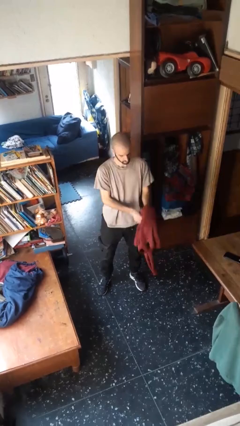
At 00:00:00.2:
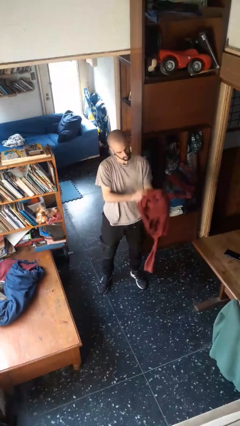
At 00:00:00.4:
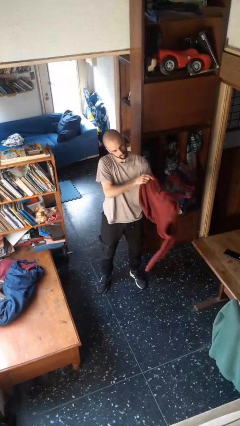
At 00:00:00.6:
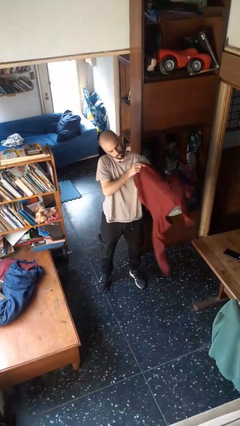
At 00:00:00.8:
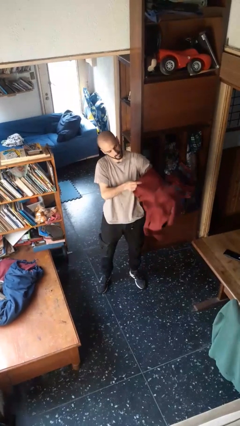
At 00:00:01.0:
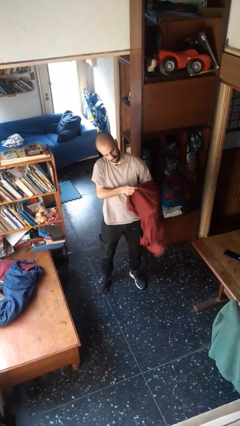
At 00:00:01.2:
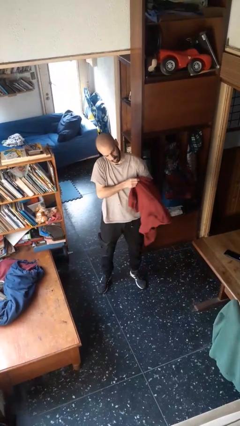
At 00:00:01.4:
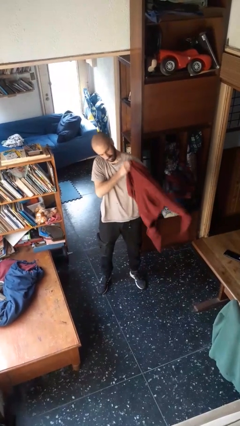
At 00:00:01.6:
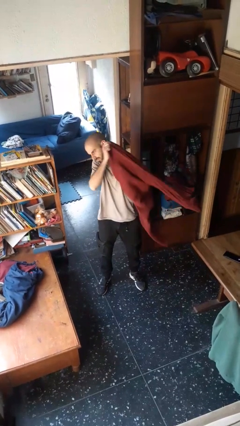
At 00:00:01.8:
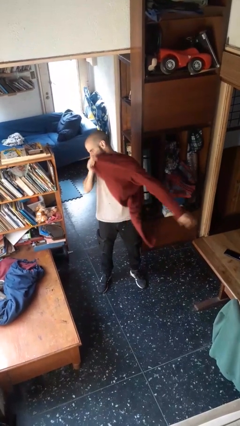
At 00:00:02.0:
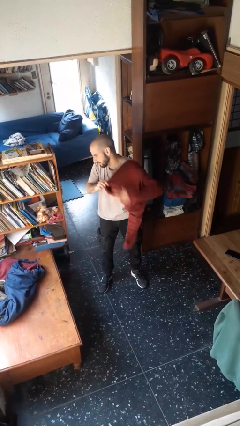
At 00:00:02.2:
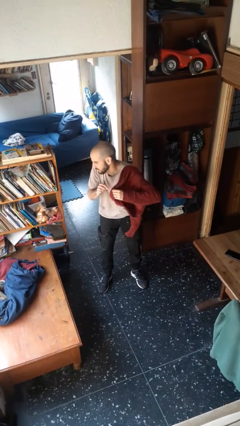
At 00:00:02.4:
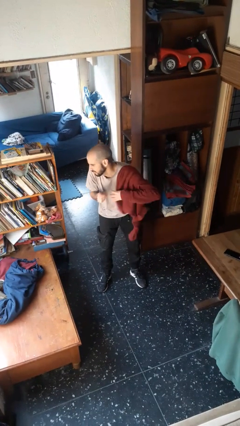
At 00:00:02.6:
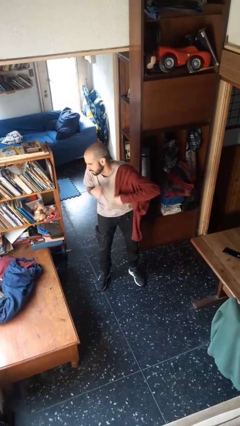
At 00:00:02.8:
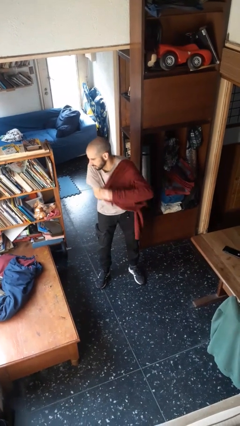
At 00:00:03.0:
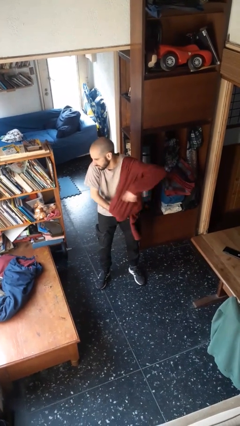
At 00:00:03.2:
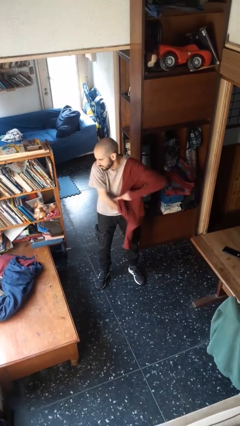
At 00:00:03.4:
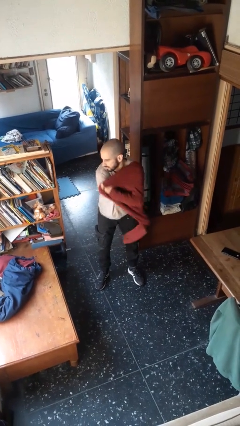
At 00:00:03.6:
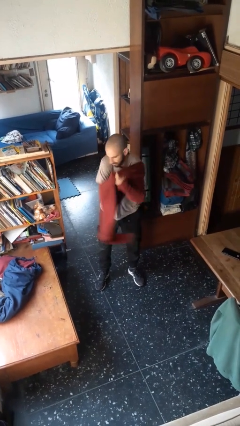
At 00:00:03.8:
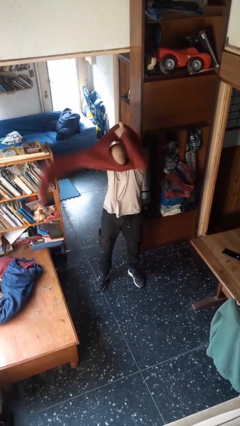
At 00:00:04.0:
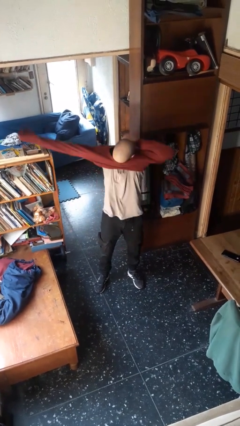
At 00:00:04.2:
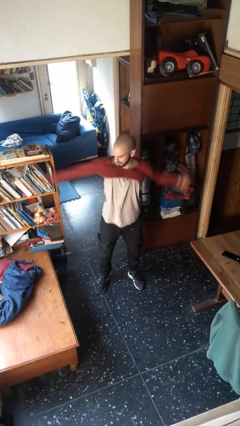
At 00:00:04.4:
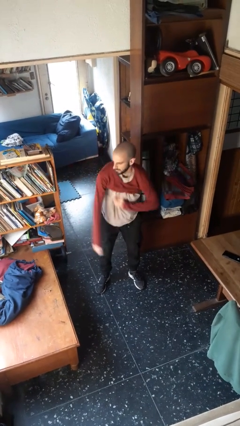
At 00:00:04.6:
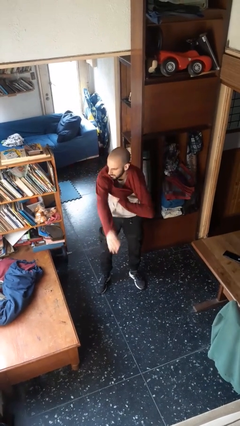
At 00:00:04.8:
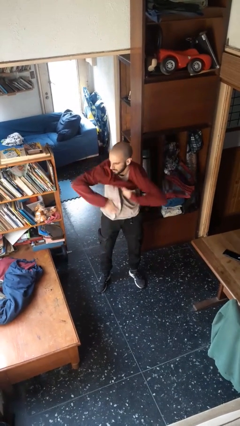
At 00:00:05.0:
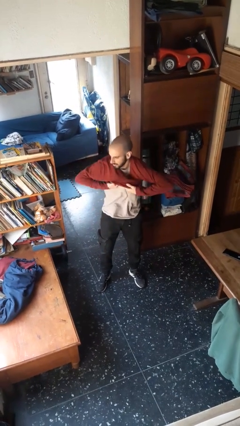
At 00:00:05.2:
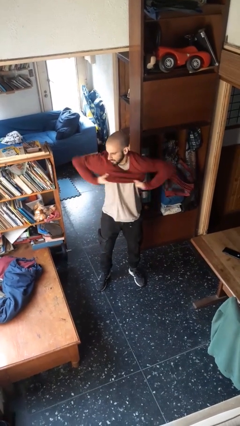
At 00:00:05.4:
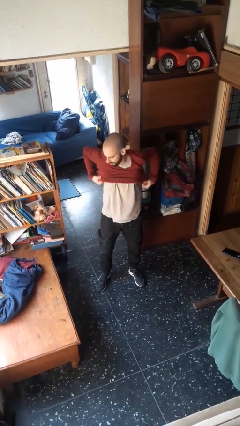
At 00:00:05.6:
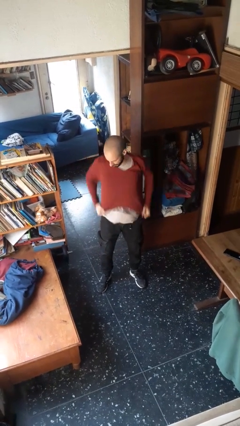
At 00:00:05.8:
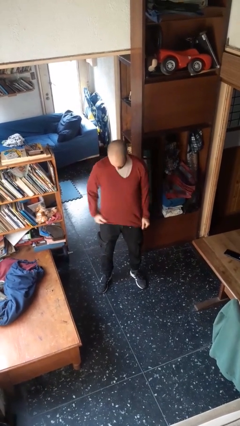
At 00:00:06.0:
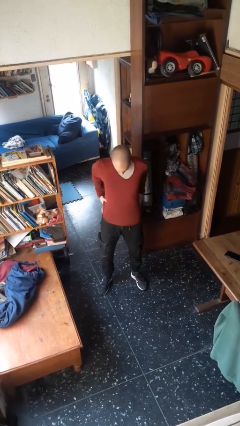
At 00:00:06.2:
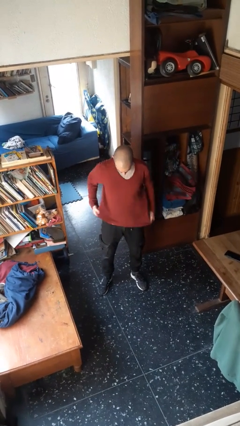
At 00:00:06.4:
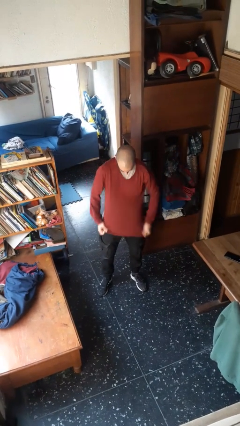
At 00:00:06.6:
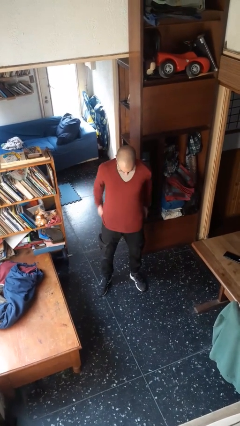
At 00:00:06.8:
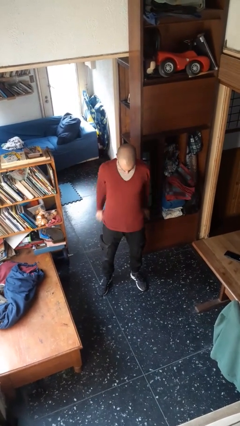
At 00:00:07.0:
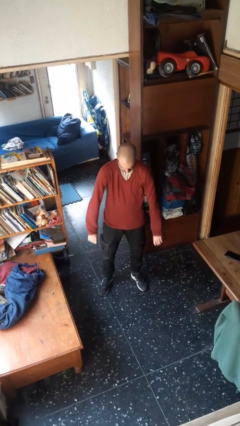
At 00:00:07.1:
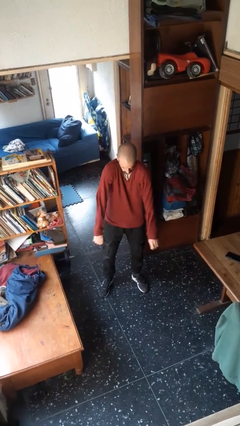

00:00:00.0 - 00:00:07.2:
person puts on shirt

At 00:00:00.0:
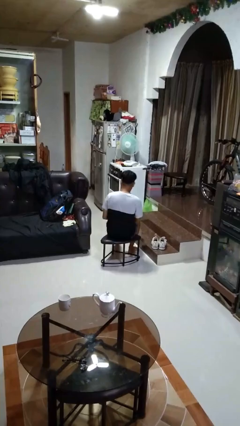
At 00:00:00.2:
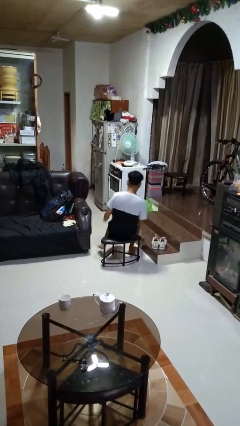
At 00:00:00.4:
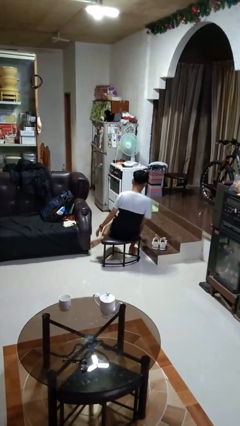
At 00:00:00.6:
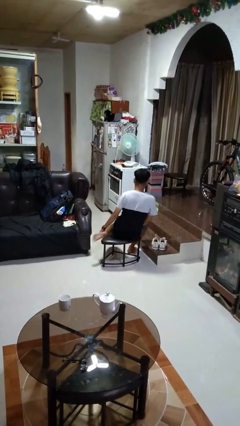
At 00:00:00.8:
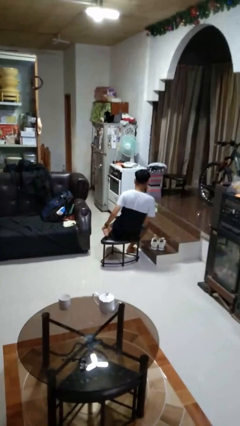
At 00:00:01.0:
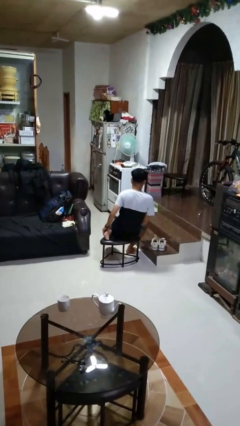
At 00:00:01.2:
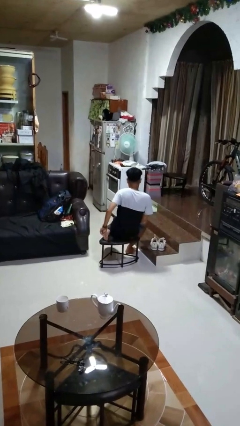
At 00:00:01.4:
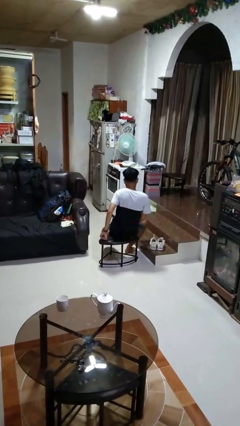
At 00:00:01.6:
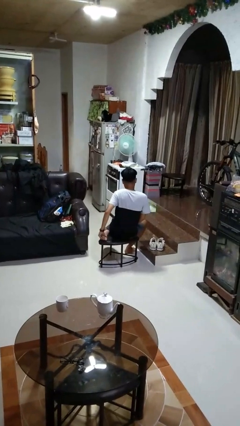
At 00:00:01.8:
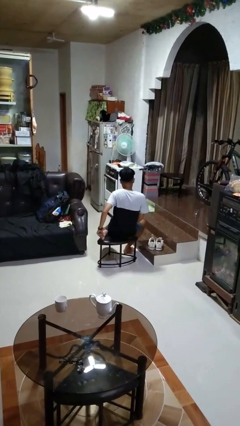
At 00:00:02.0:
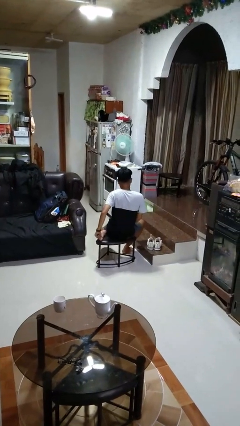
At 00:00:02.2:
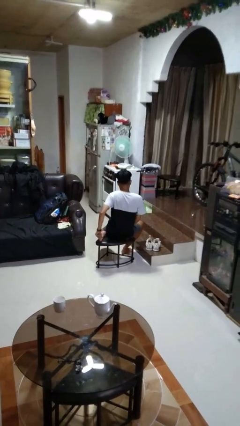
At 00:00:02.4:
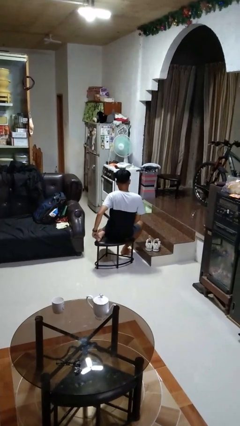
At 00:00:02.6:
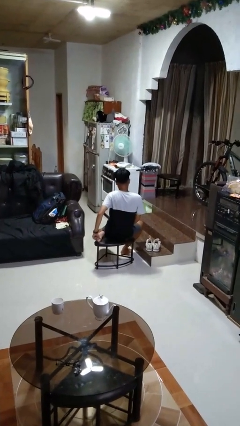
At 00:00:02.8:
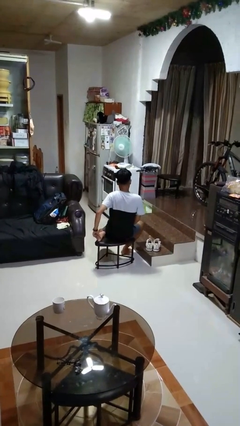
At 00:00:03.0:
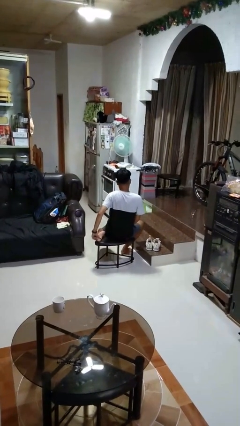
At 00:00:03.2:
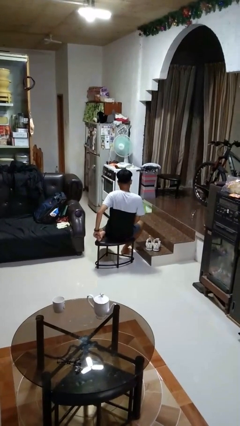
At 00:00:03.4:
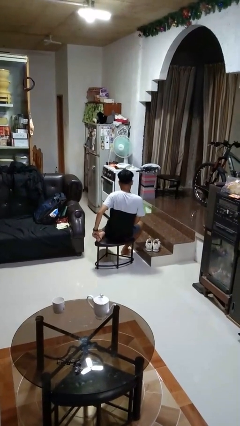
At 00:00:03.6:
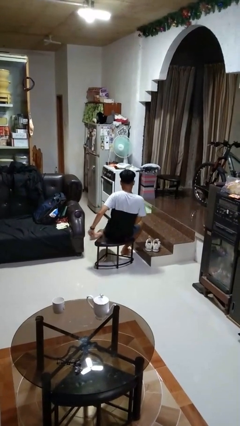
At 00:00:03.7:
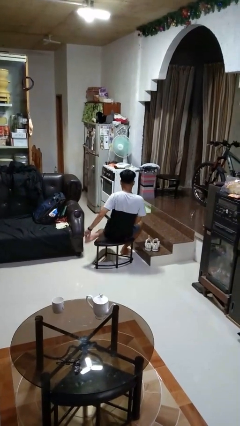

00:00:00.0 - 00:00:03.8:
person rubs foot

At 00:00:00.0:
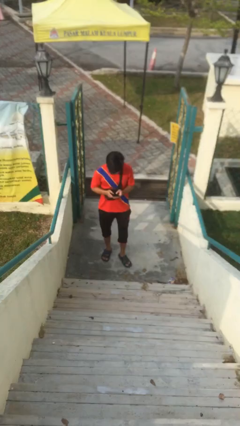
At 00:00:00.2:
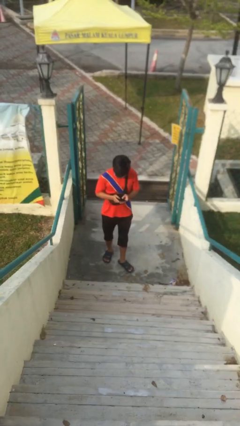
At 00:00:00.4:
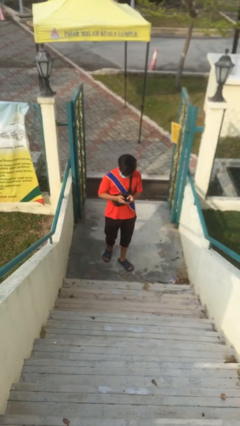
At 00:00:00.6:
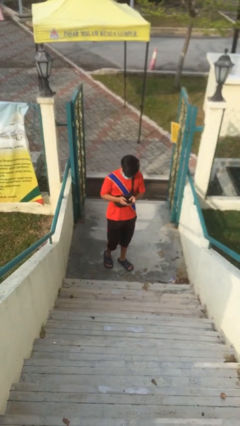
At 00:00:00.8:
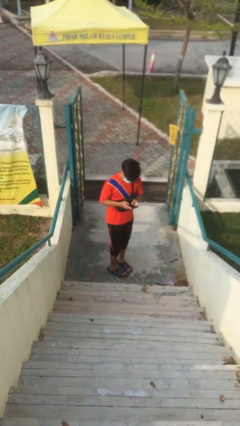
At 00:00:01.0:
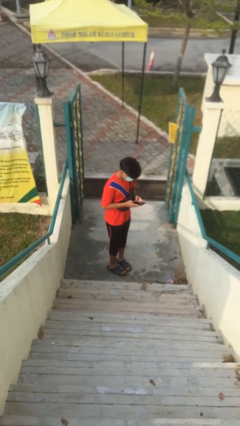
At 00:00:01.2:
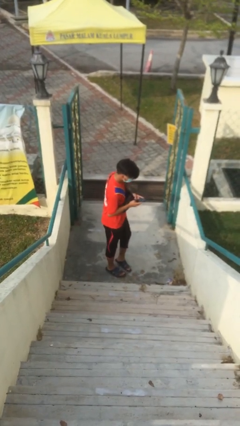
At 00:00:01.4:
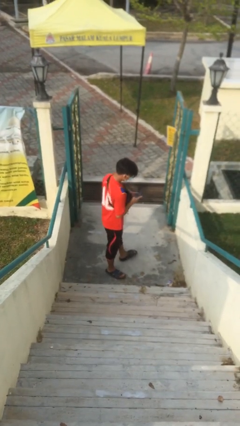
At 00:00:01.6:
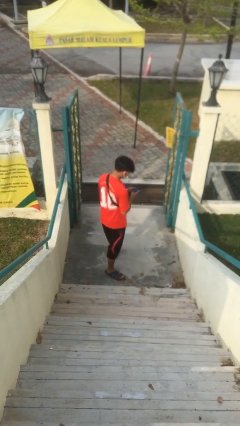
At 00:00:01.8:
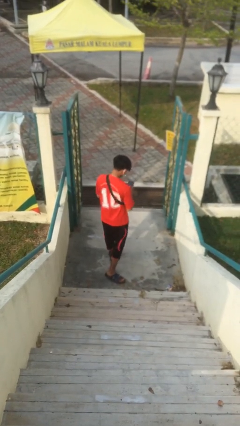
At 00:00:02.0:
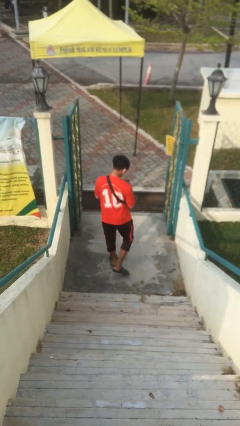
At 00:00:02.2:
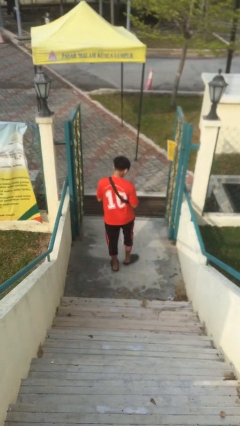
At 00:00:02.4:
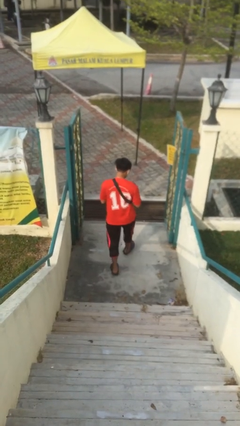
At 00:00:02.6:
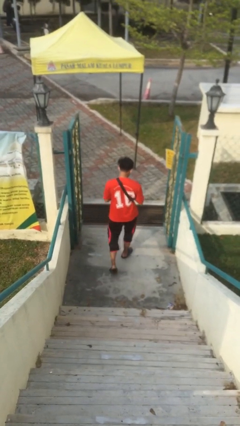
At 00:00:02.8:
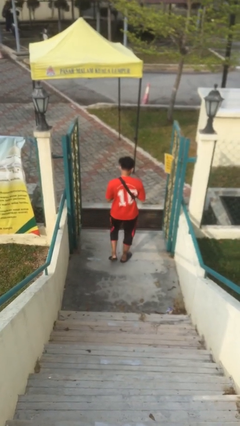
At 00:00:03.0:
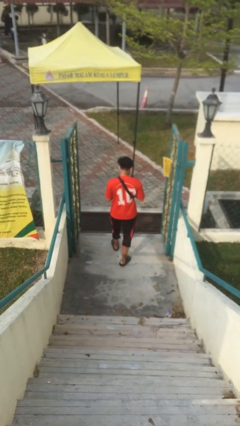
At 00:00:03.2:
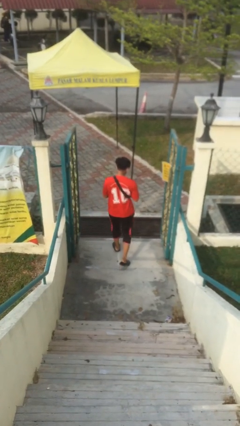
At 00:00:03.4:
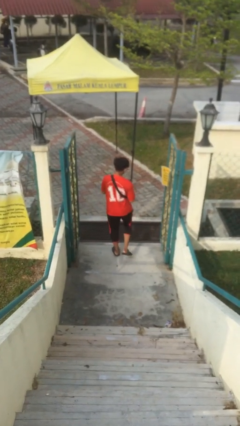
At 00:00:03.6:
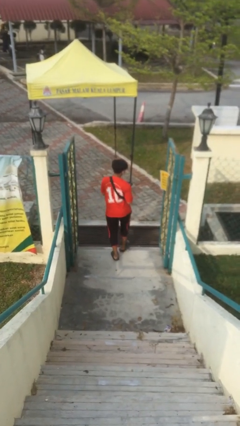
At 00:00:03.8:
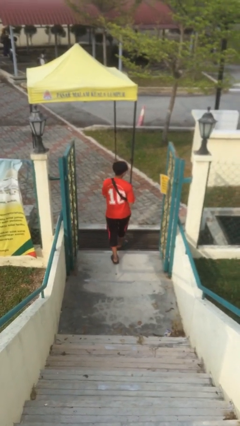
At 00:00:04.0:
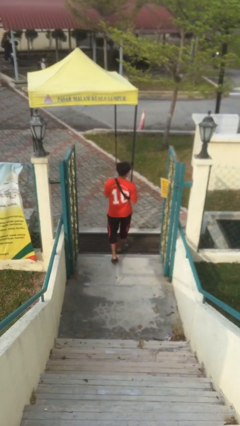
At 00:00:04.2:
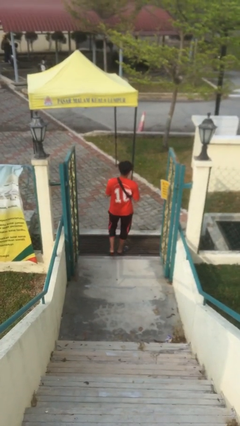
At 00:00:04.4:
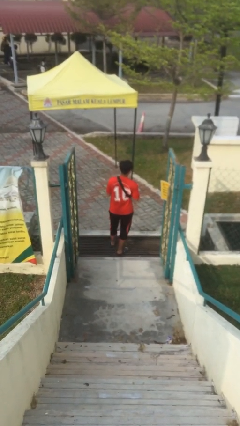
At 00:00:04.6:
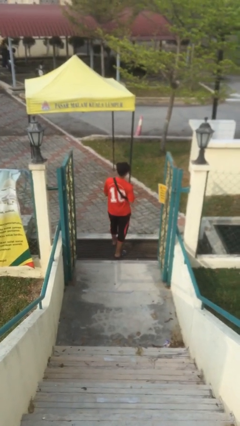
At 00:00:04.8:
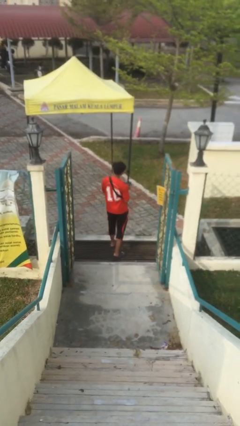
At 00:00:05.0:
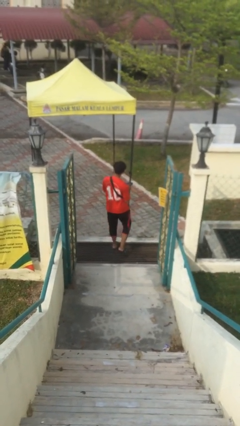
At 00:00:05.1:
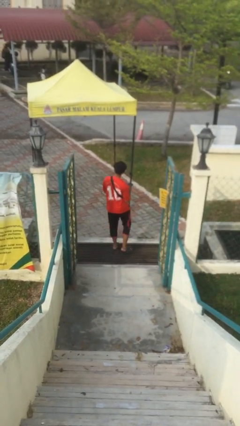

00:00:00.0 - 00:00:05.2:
person exits scene through structure

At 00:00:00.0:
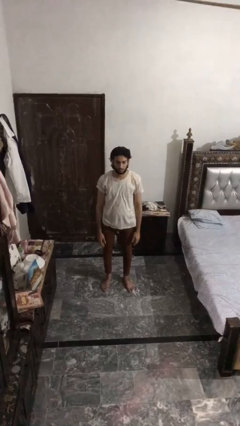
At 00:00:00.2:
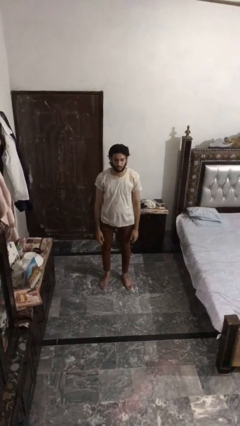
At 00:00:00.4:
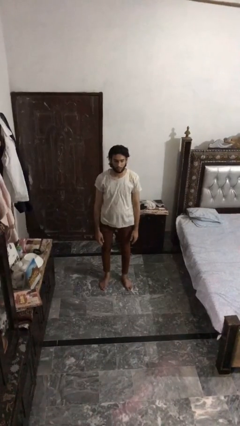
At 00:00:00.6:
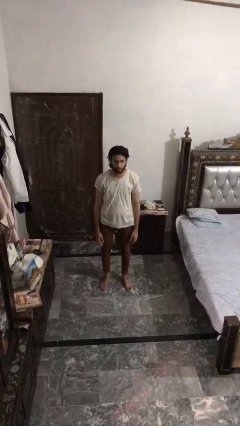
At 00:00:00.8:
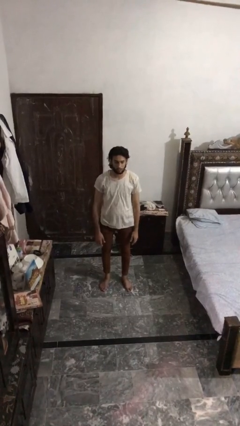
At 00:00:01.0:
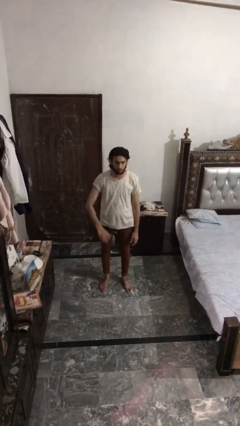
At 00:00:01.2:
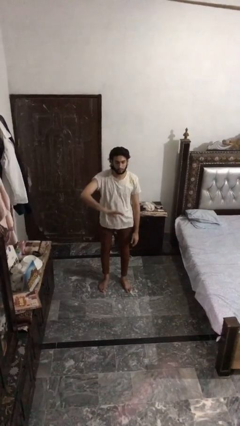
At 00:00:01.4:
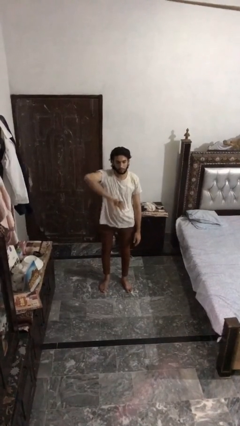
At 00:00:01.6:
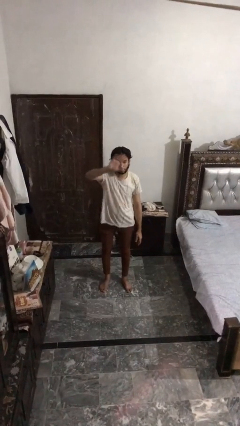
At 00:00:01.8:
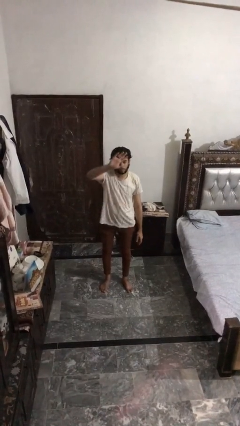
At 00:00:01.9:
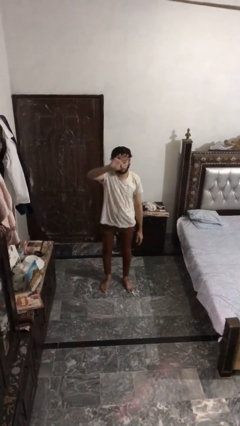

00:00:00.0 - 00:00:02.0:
person gestures swipe up
